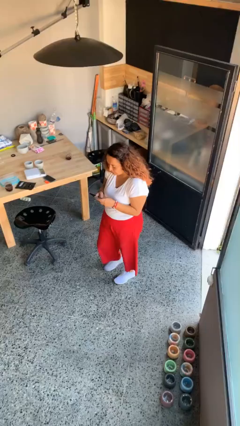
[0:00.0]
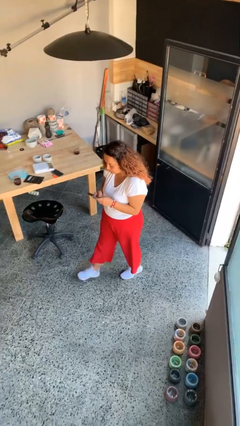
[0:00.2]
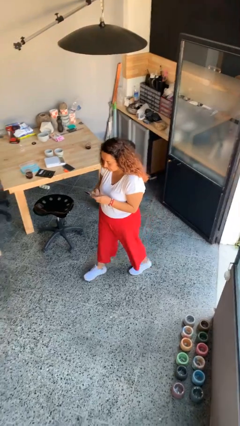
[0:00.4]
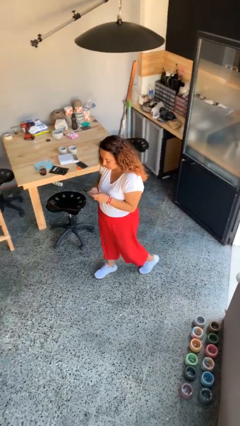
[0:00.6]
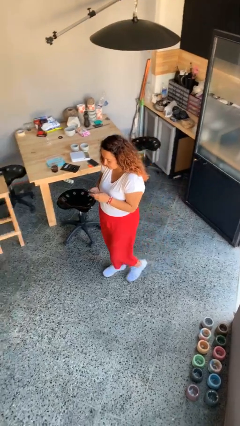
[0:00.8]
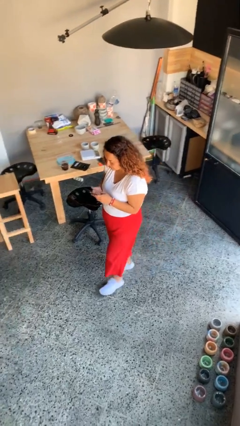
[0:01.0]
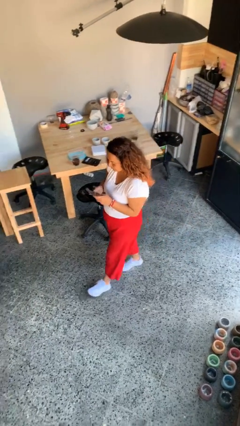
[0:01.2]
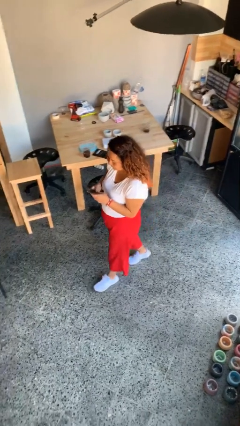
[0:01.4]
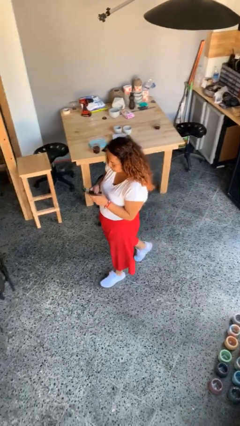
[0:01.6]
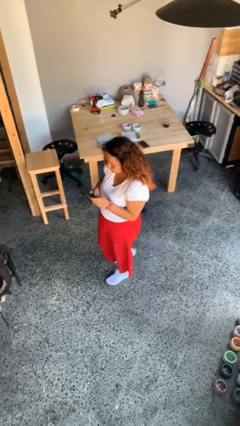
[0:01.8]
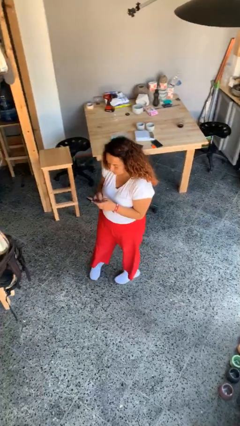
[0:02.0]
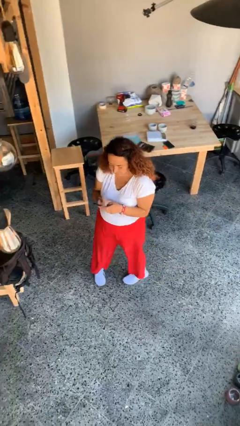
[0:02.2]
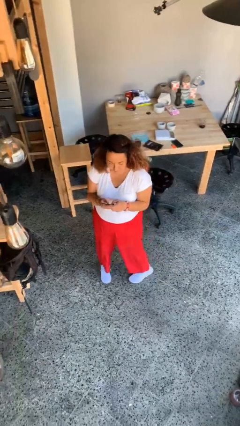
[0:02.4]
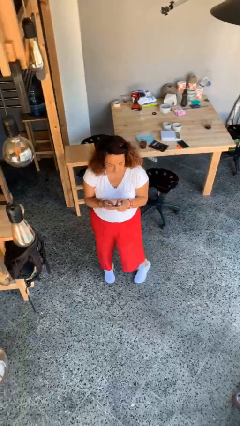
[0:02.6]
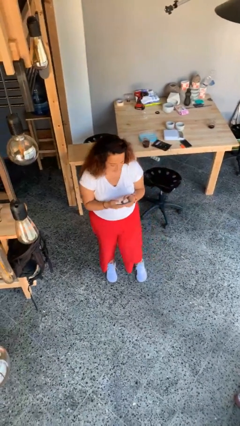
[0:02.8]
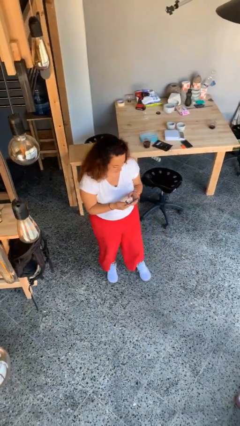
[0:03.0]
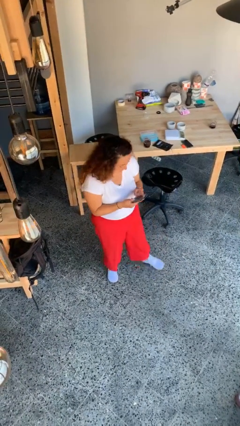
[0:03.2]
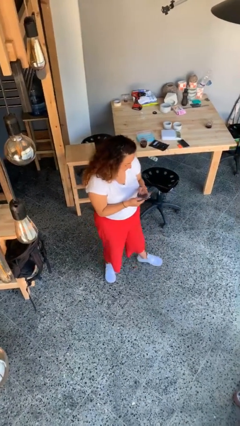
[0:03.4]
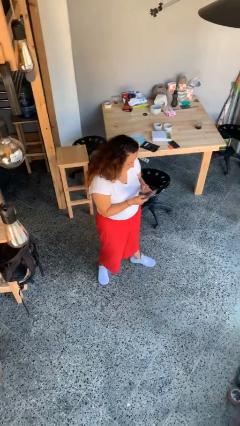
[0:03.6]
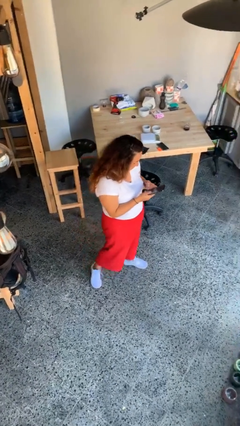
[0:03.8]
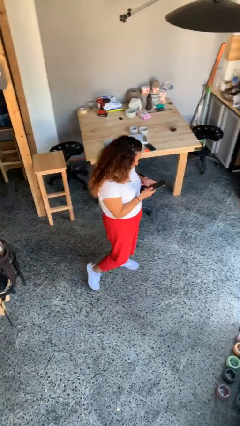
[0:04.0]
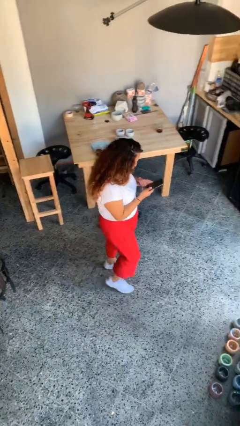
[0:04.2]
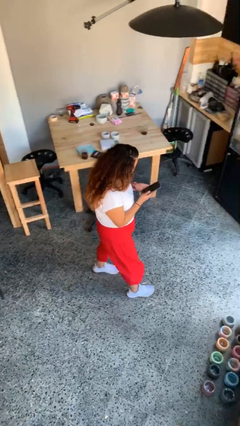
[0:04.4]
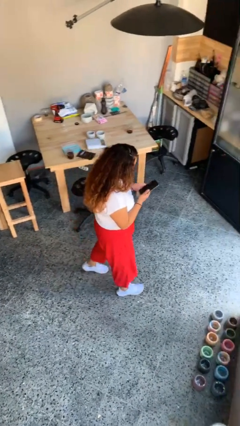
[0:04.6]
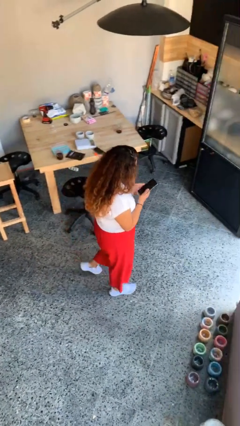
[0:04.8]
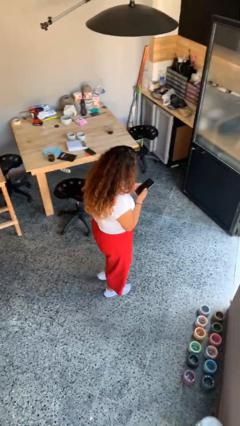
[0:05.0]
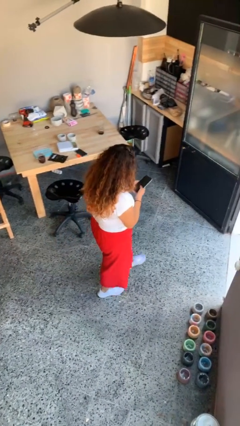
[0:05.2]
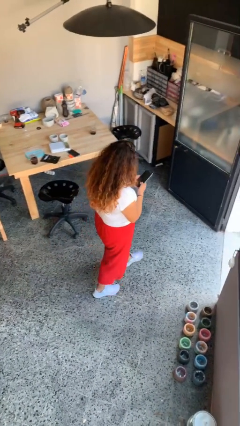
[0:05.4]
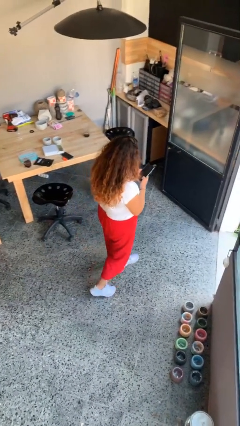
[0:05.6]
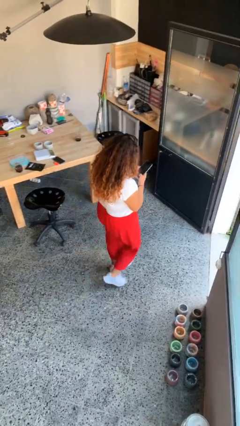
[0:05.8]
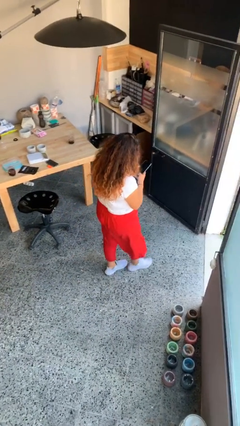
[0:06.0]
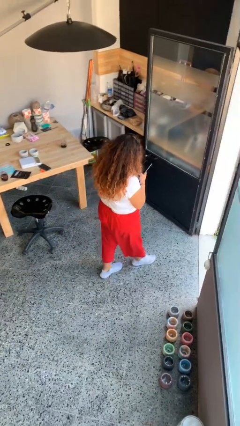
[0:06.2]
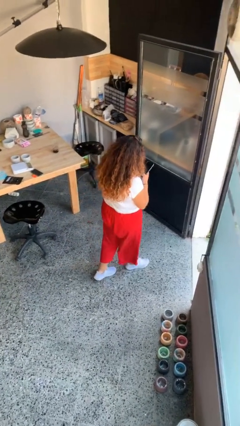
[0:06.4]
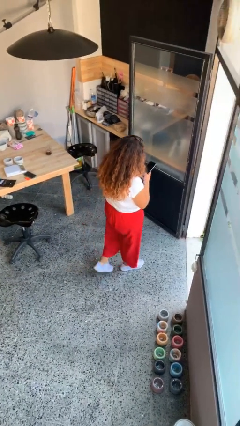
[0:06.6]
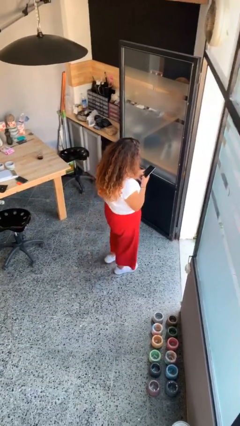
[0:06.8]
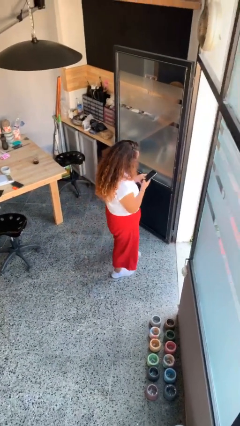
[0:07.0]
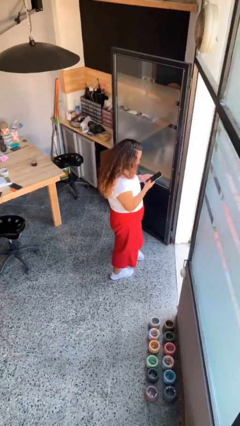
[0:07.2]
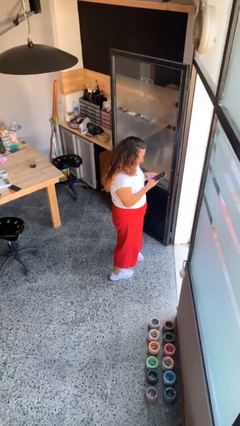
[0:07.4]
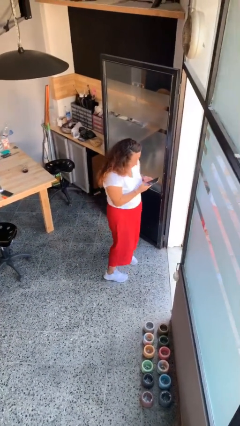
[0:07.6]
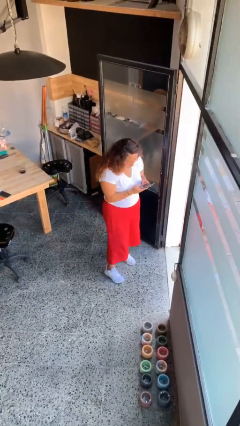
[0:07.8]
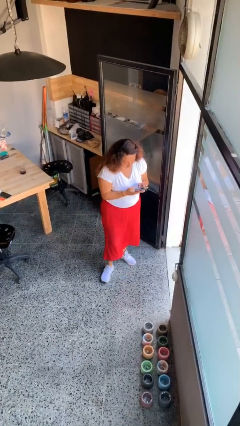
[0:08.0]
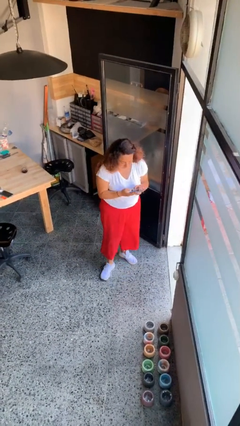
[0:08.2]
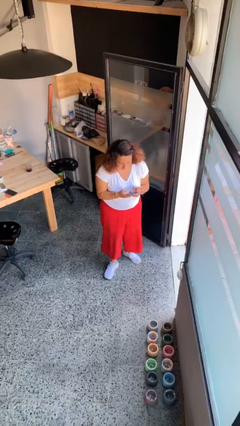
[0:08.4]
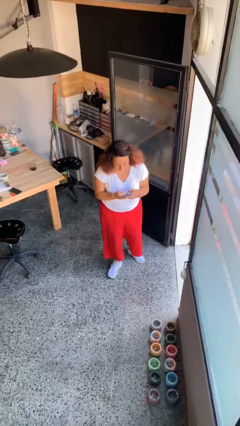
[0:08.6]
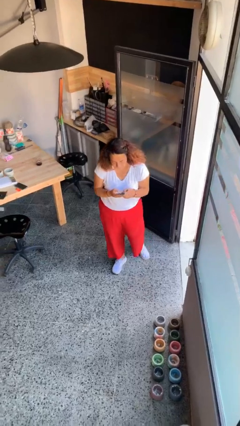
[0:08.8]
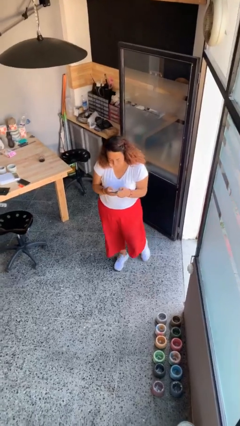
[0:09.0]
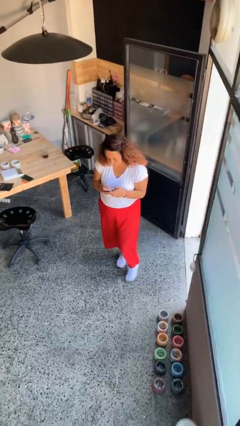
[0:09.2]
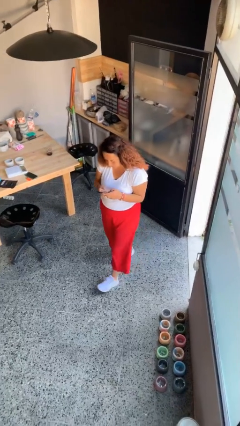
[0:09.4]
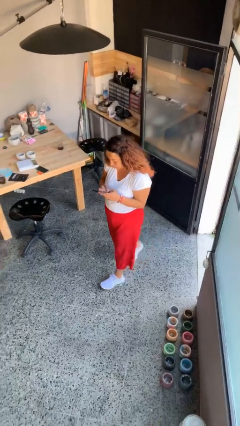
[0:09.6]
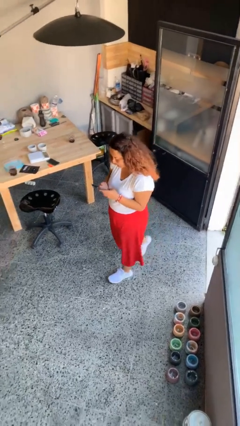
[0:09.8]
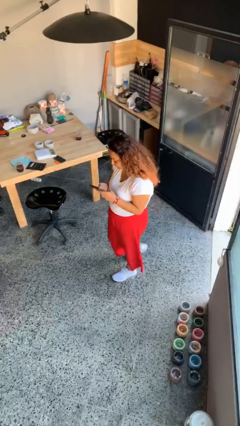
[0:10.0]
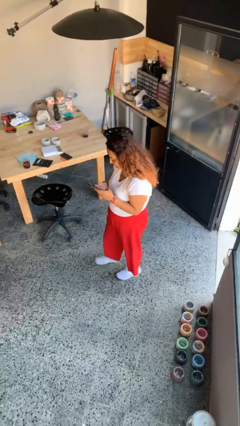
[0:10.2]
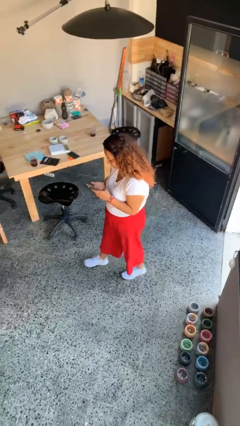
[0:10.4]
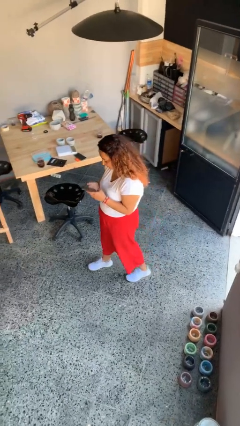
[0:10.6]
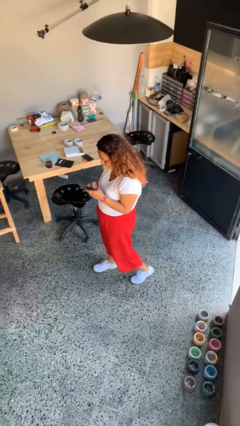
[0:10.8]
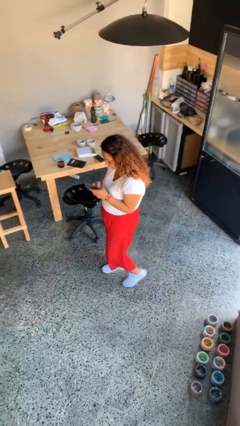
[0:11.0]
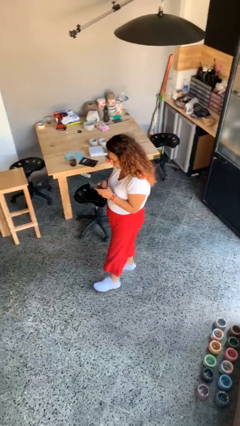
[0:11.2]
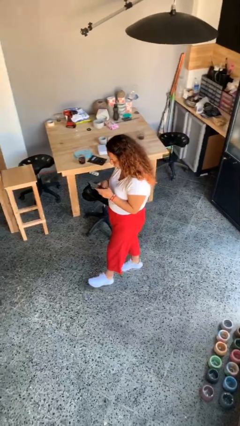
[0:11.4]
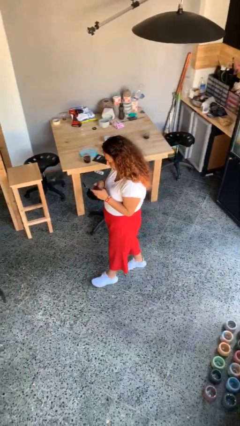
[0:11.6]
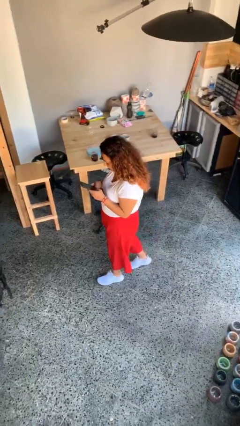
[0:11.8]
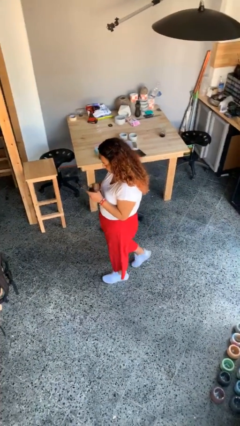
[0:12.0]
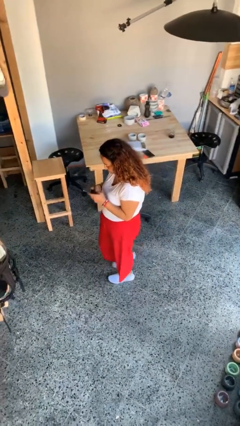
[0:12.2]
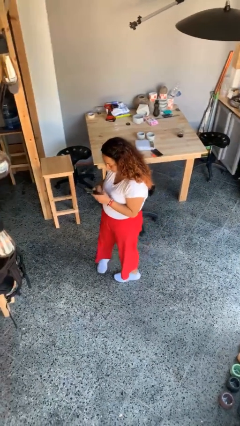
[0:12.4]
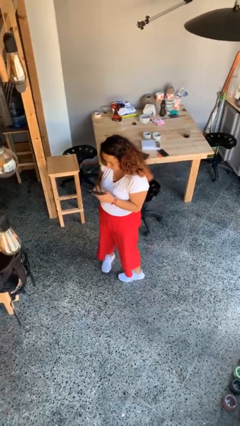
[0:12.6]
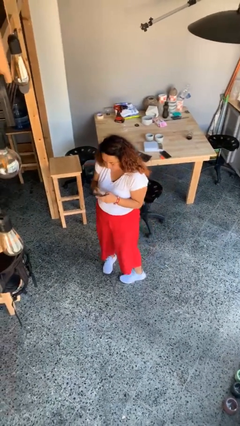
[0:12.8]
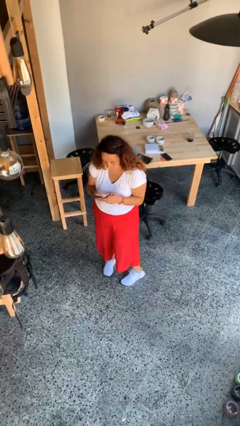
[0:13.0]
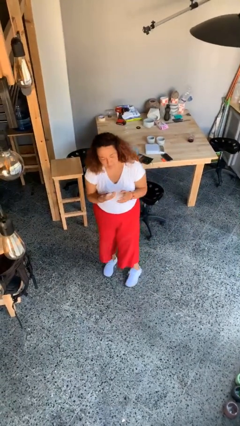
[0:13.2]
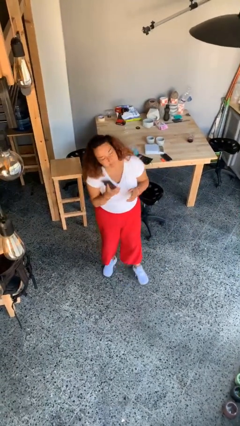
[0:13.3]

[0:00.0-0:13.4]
person texts on phone

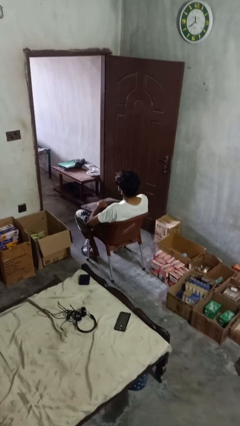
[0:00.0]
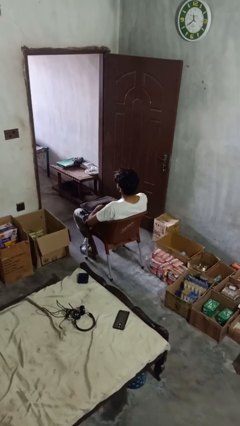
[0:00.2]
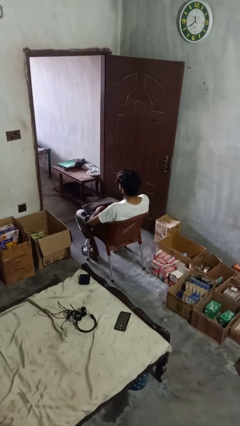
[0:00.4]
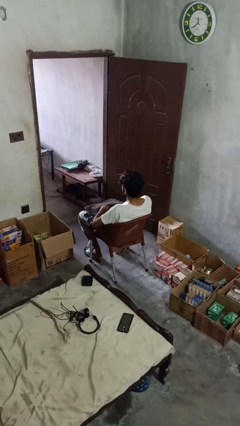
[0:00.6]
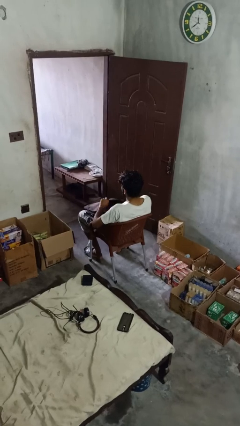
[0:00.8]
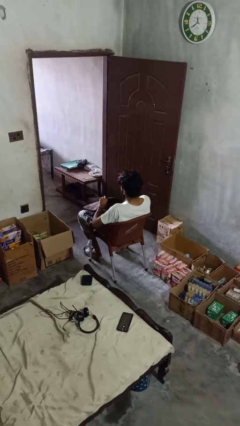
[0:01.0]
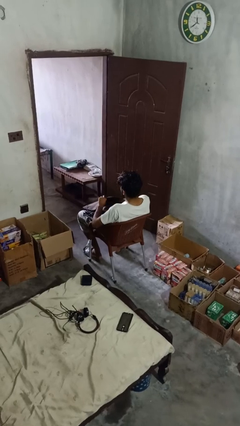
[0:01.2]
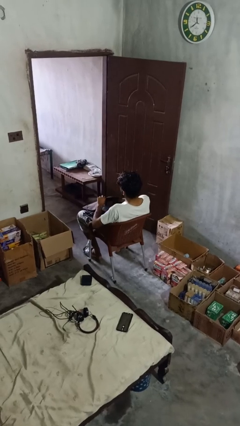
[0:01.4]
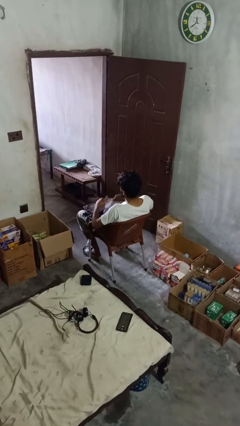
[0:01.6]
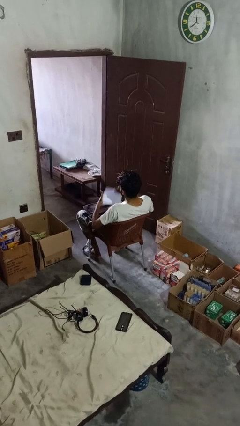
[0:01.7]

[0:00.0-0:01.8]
person searches in backpack

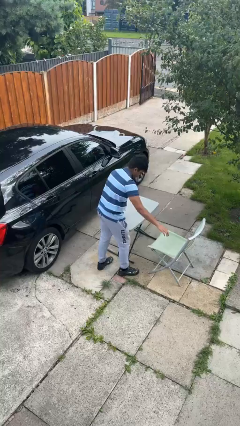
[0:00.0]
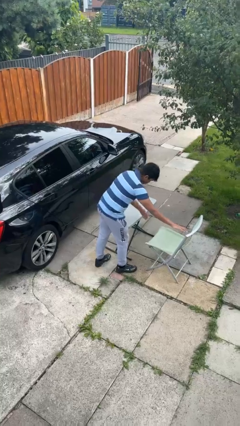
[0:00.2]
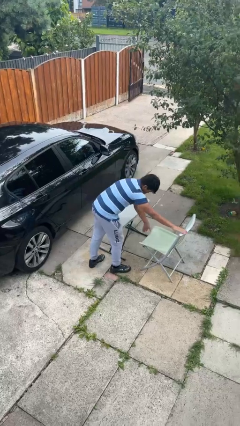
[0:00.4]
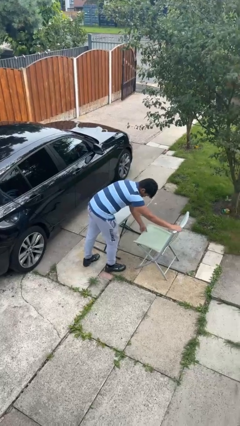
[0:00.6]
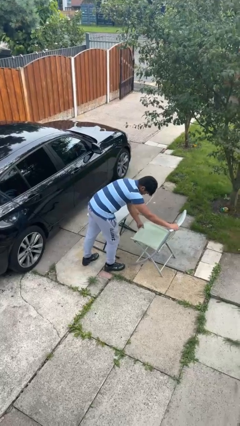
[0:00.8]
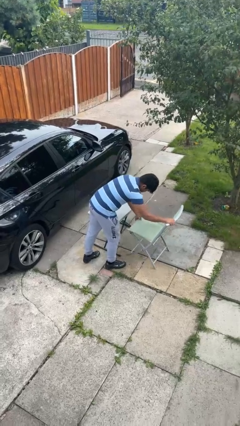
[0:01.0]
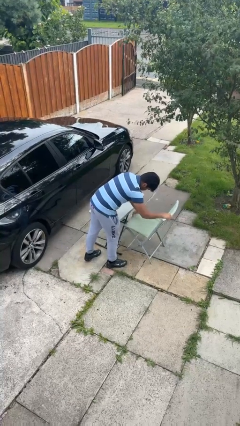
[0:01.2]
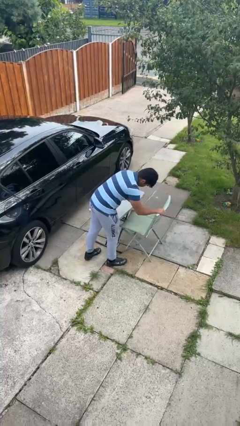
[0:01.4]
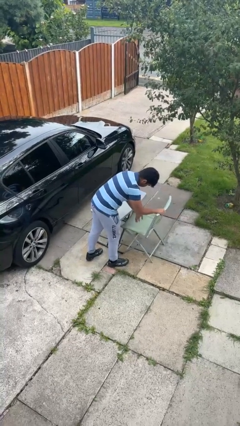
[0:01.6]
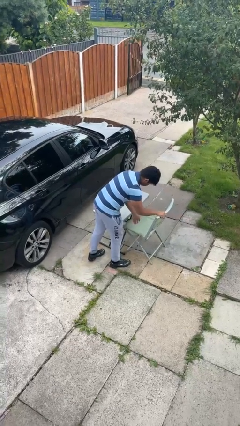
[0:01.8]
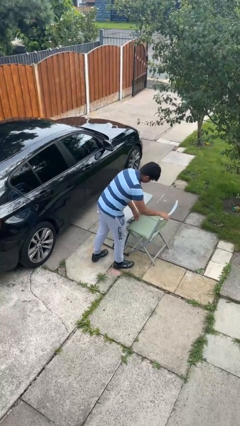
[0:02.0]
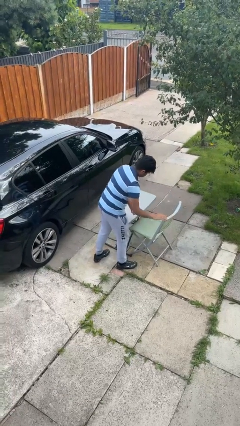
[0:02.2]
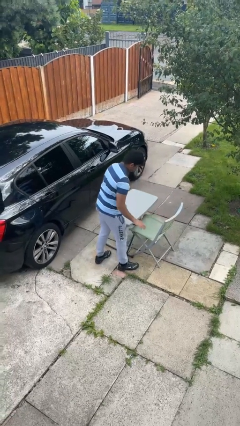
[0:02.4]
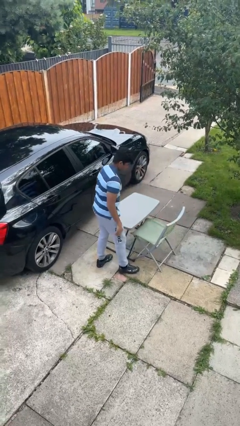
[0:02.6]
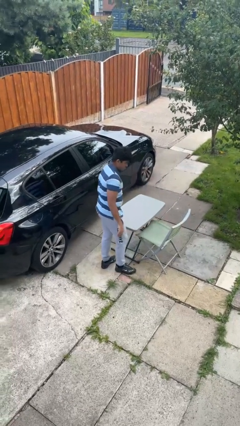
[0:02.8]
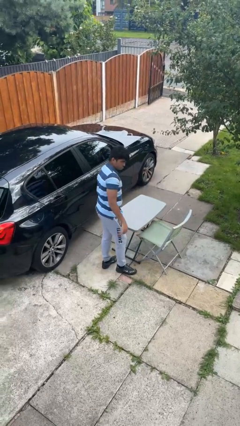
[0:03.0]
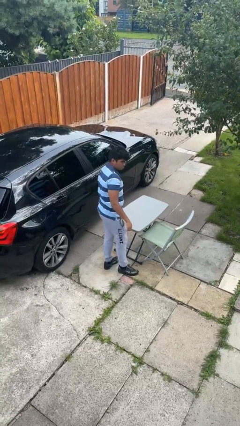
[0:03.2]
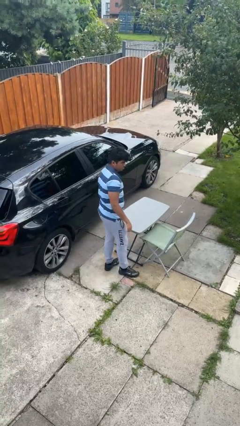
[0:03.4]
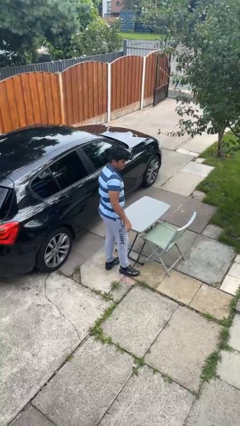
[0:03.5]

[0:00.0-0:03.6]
person pushes in chair
